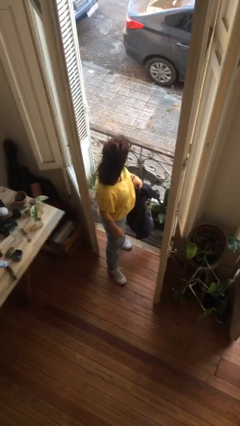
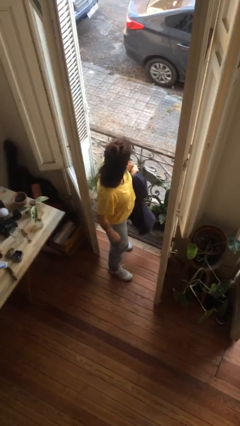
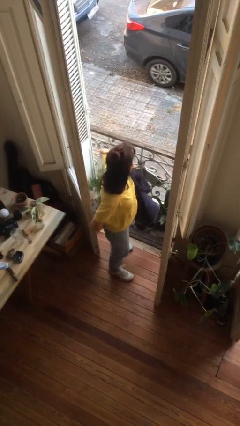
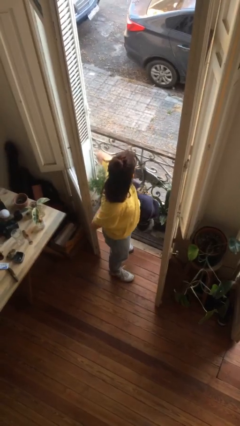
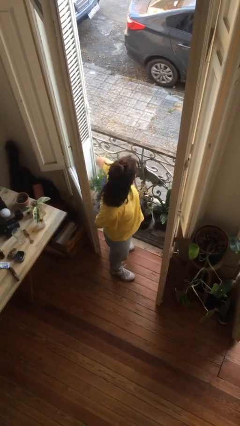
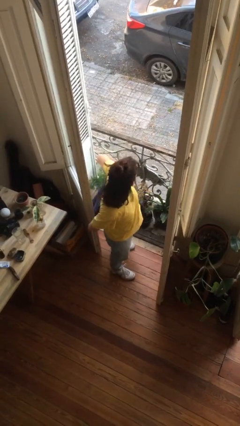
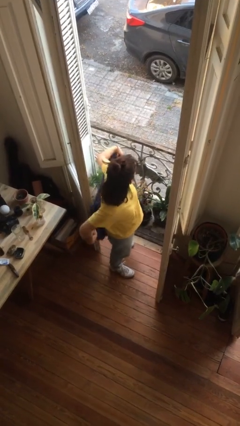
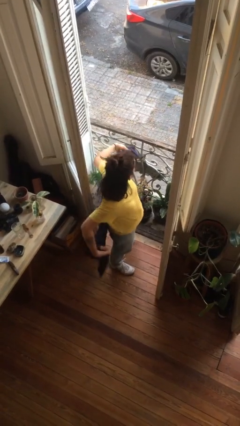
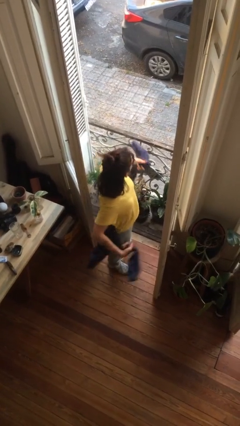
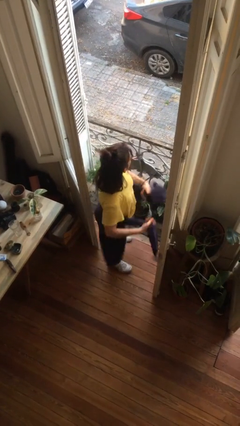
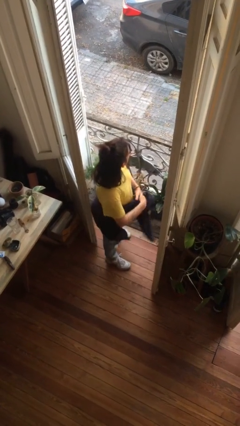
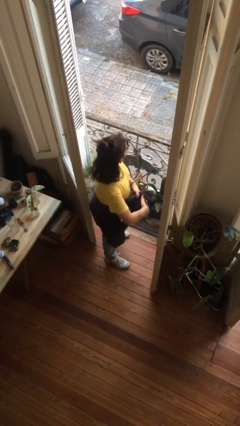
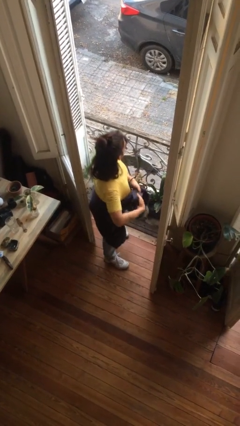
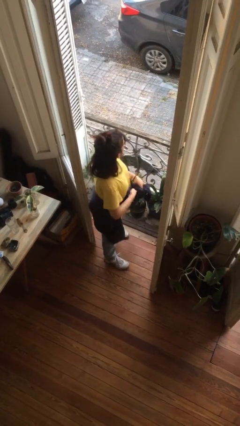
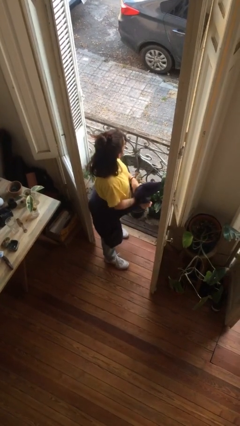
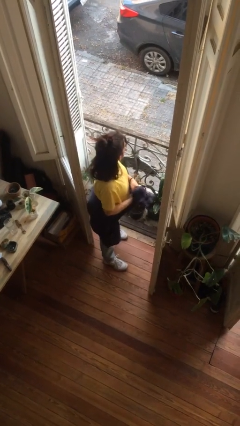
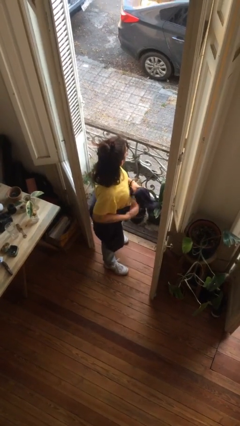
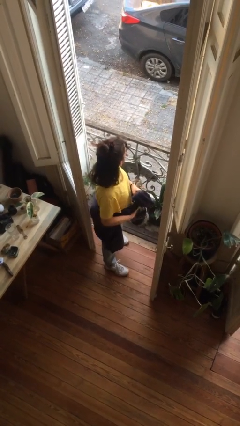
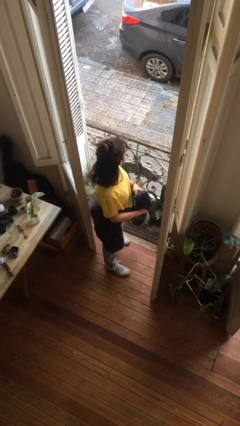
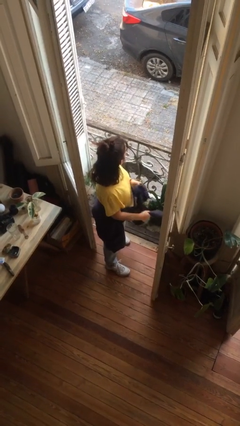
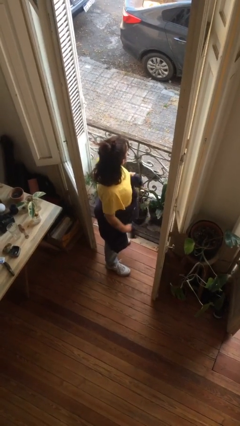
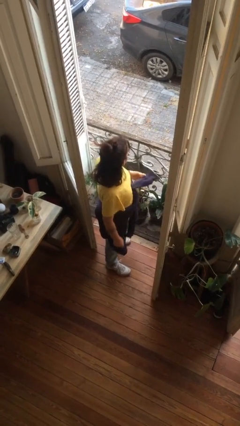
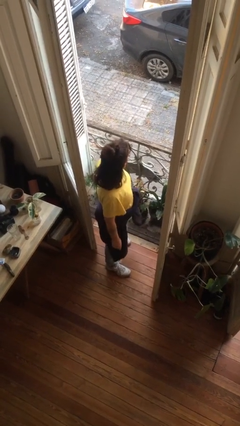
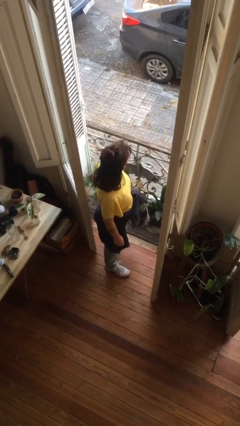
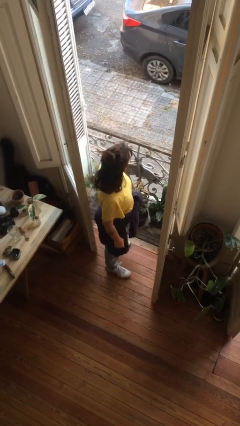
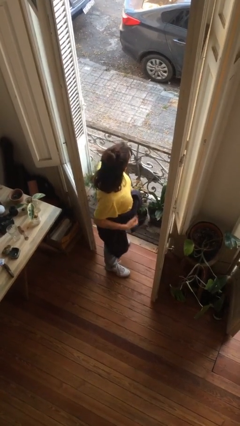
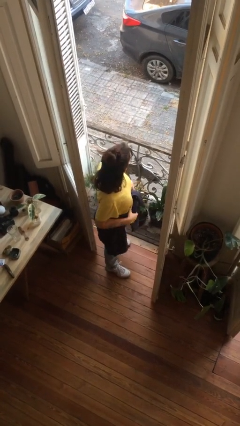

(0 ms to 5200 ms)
person ties jacket around waist

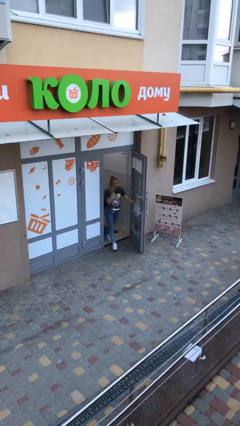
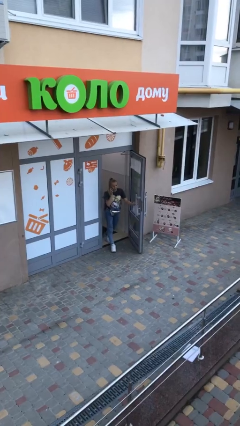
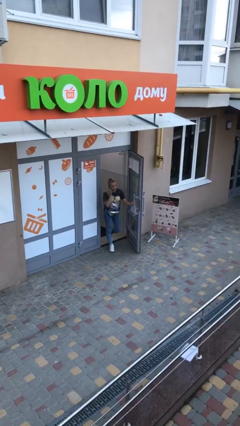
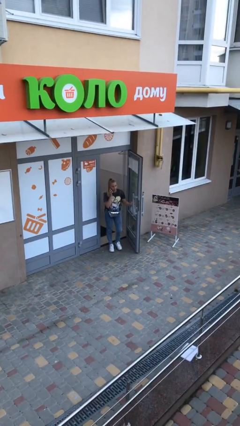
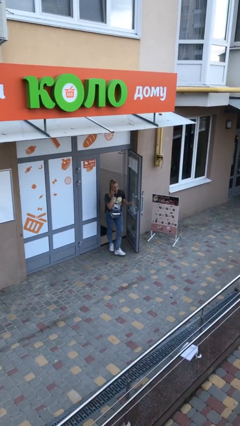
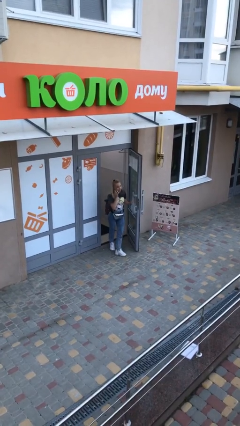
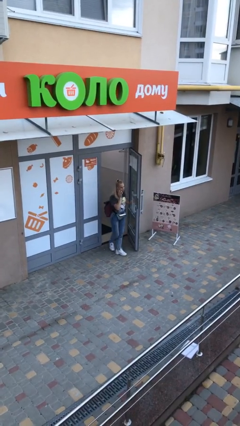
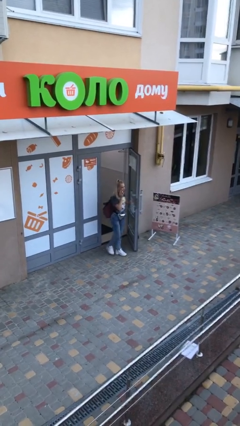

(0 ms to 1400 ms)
person enters scene through structure

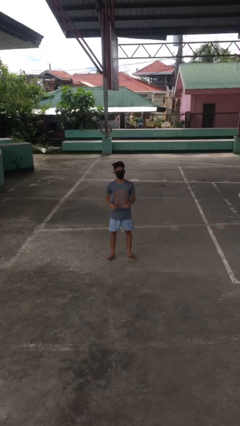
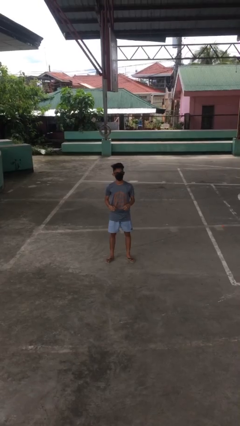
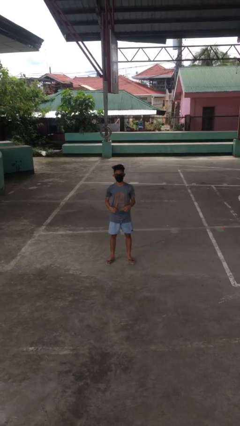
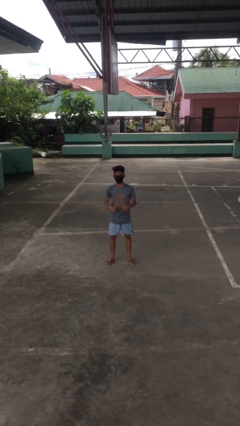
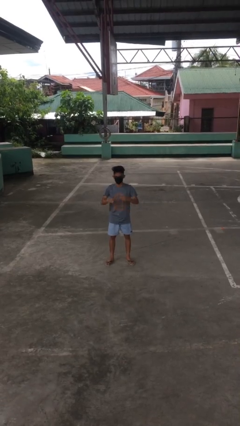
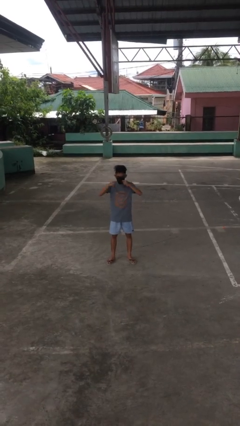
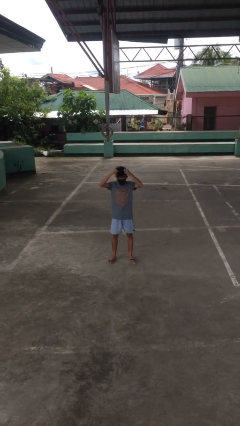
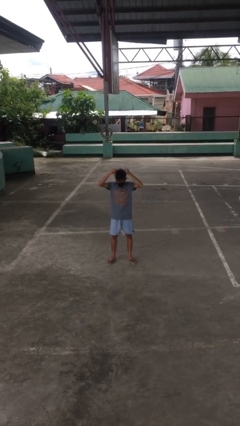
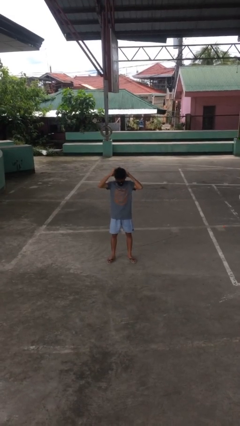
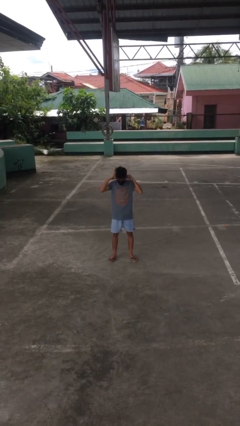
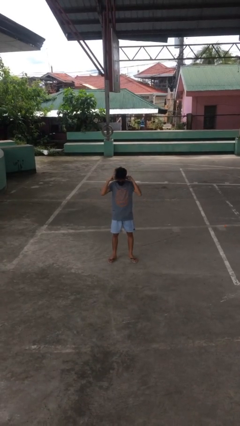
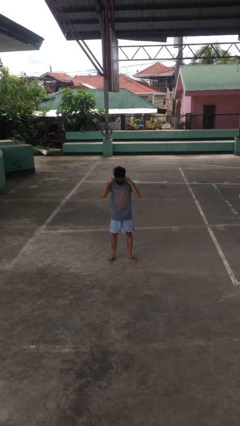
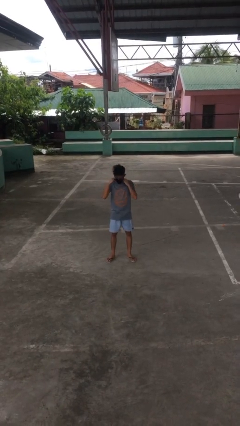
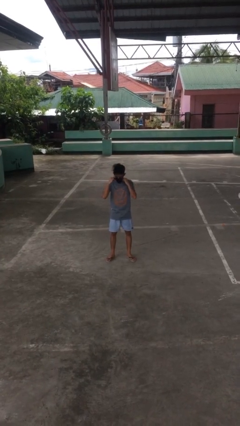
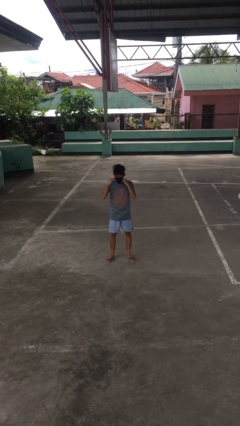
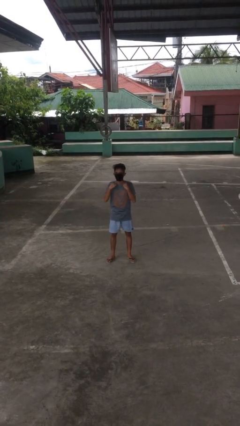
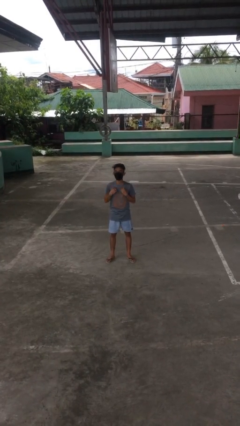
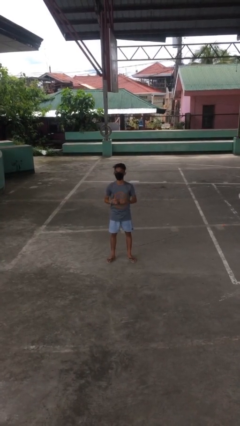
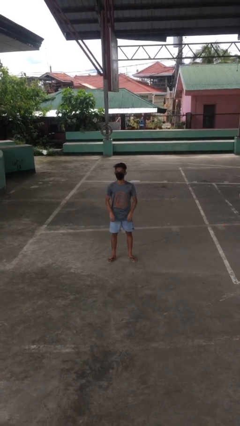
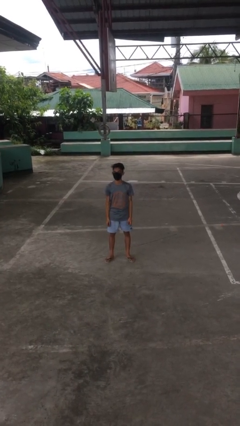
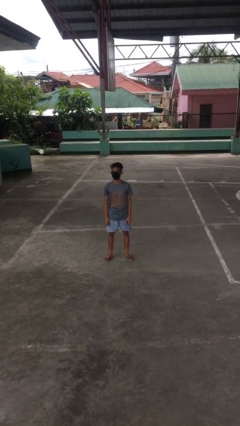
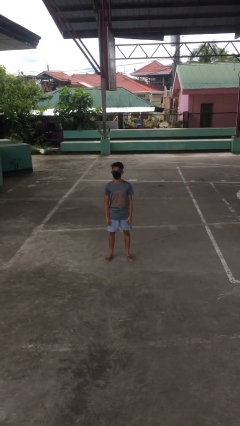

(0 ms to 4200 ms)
person puts on necklace

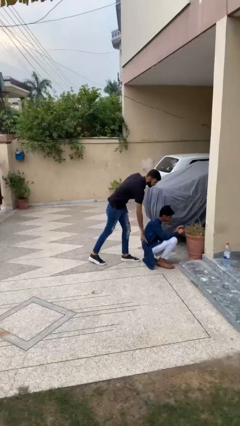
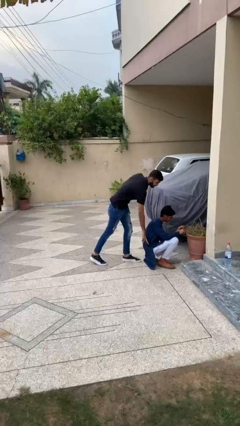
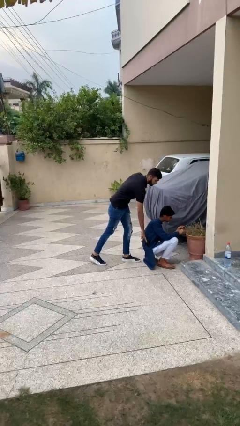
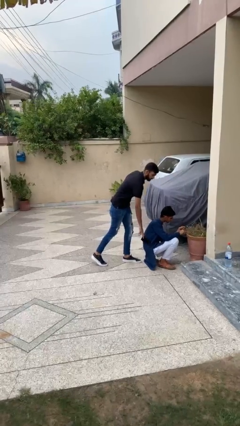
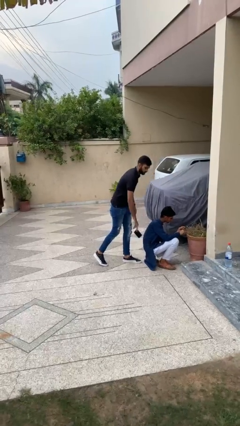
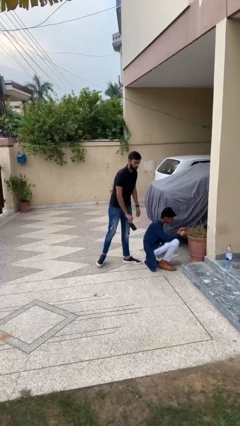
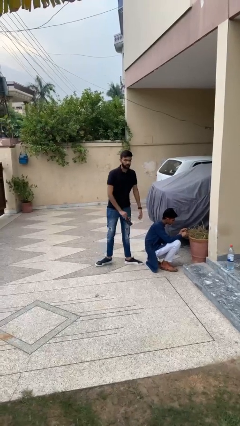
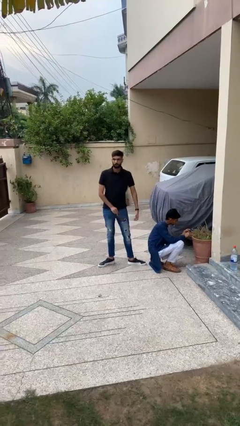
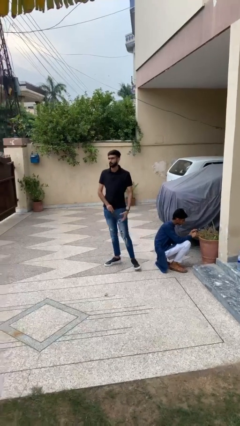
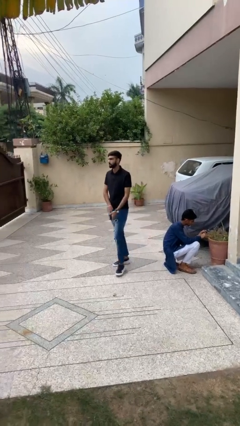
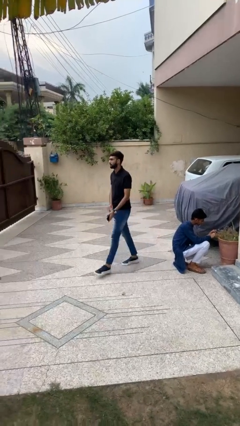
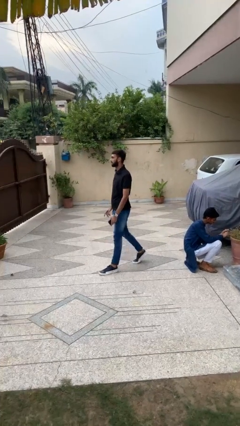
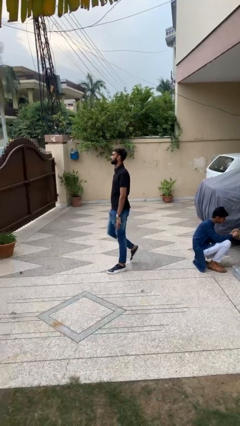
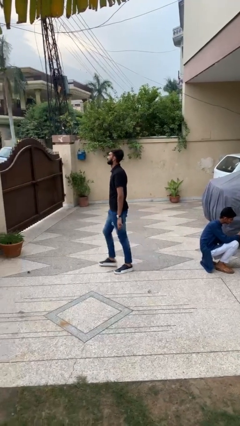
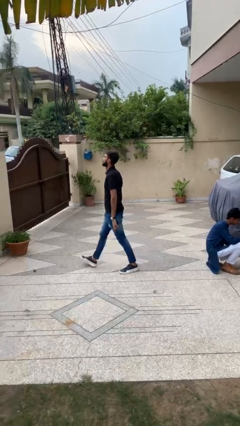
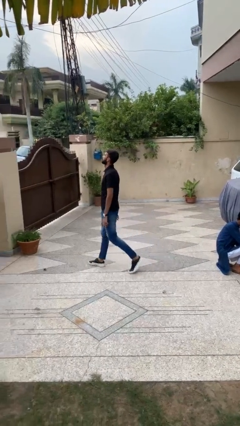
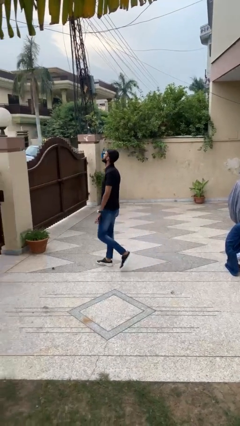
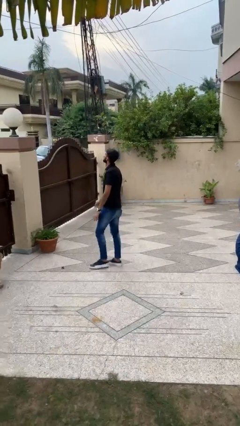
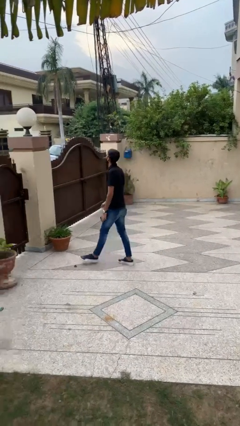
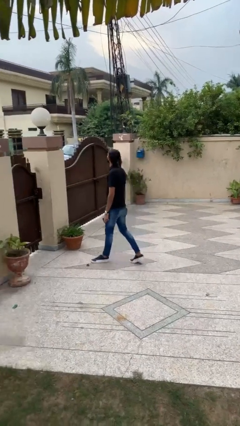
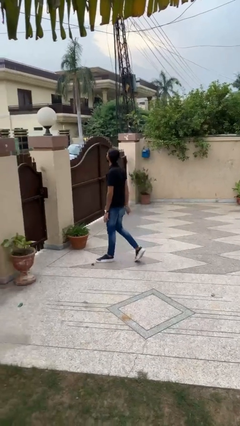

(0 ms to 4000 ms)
person steals object from person

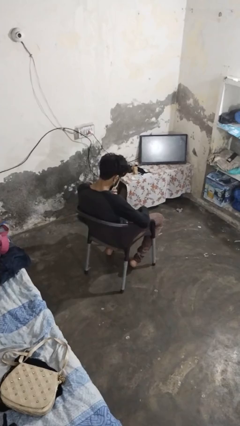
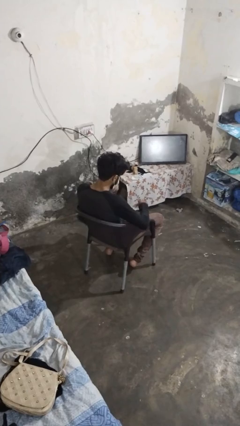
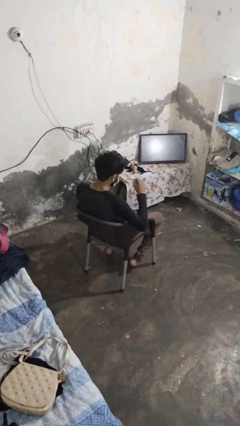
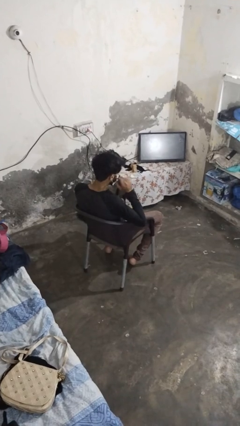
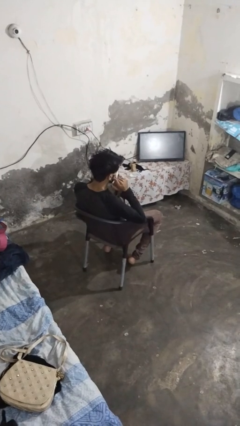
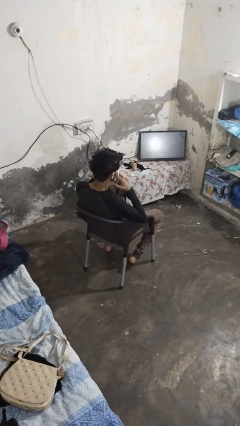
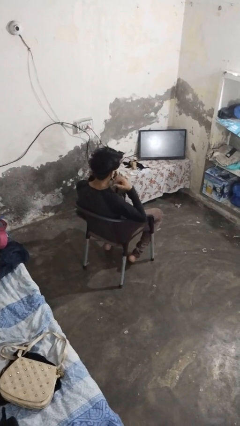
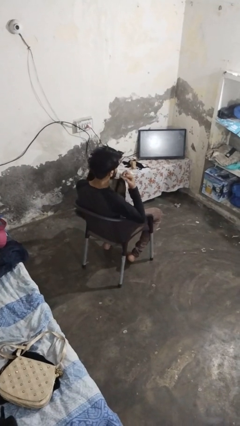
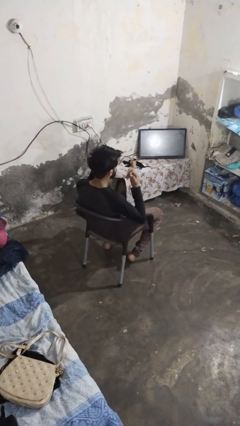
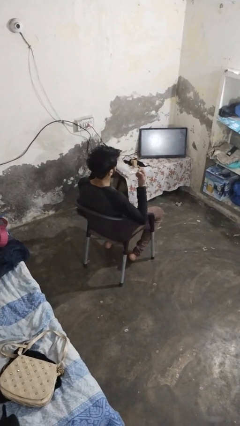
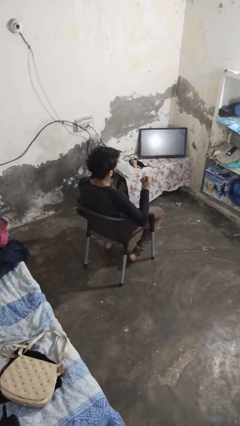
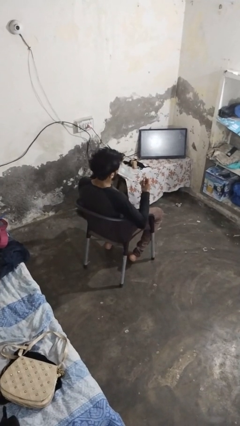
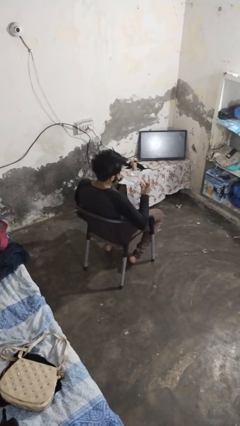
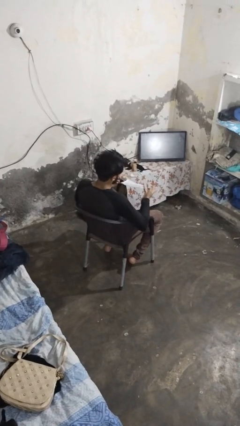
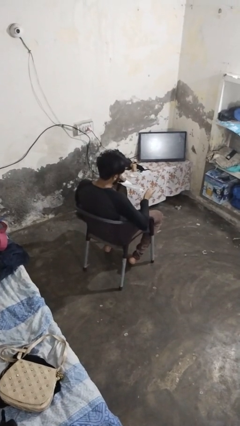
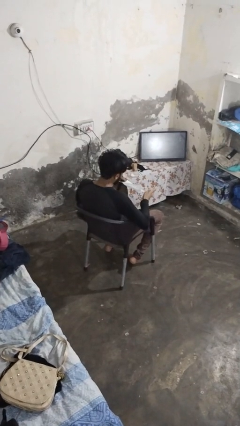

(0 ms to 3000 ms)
person takes off facemask
